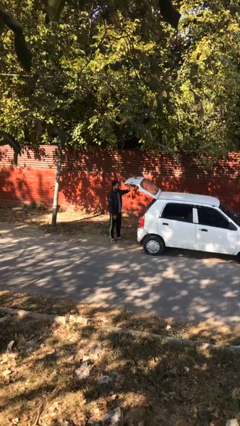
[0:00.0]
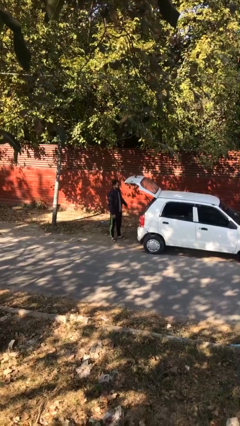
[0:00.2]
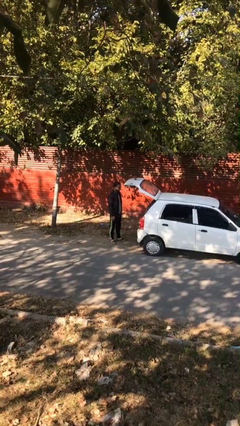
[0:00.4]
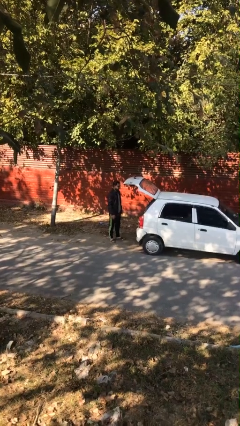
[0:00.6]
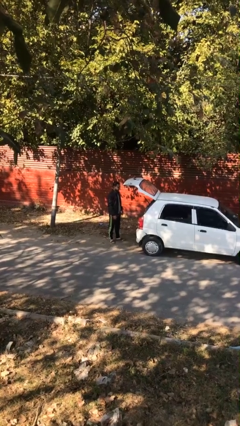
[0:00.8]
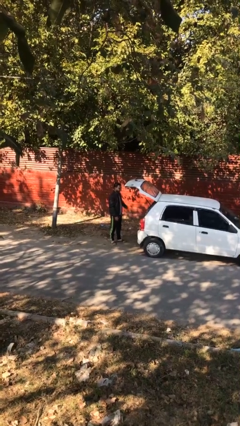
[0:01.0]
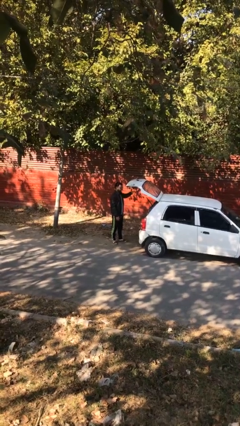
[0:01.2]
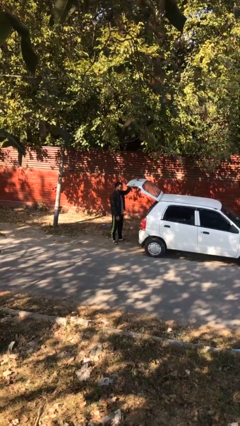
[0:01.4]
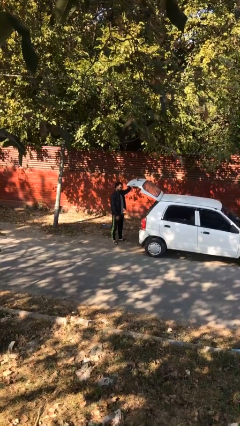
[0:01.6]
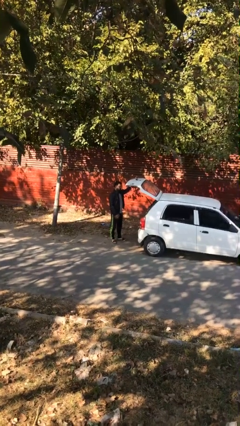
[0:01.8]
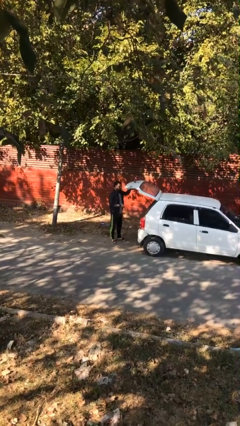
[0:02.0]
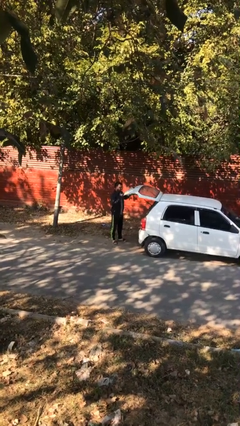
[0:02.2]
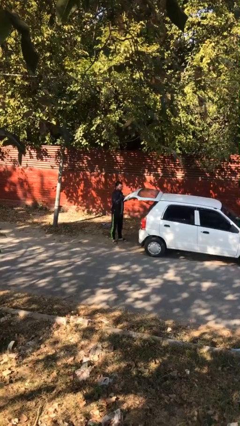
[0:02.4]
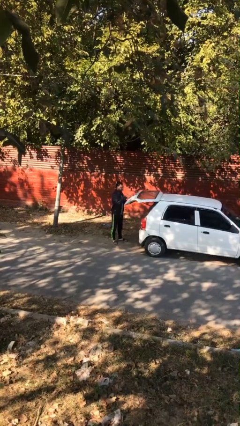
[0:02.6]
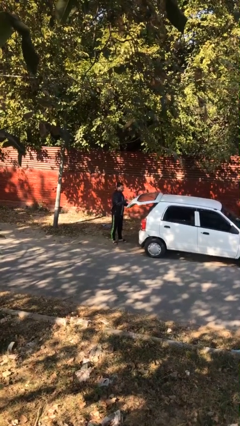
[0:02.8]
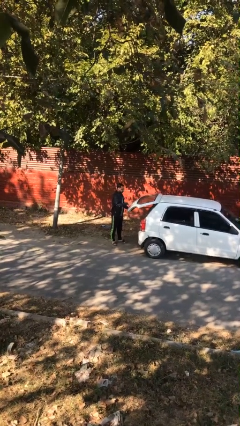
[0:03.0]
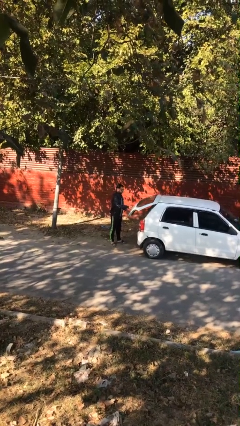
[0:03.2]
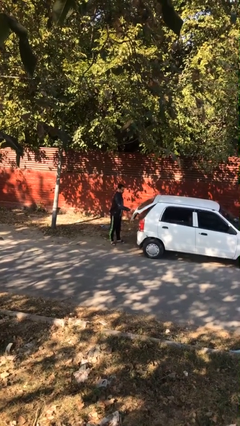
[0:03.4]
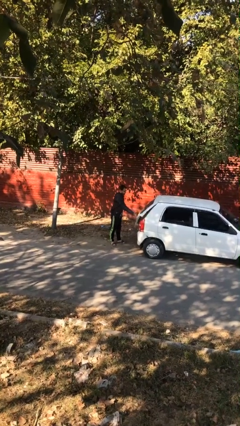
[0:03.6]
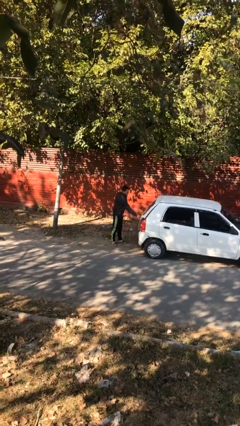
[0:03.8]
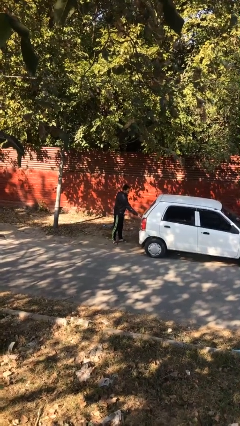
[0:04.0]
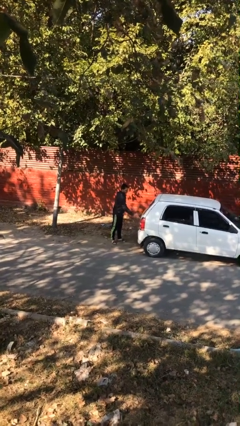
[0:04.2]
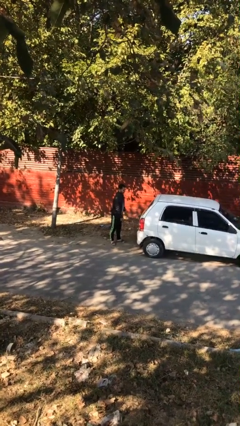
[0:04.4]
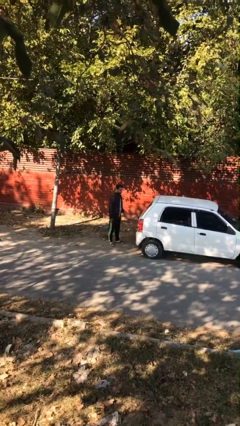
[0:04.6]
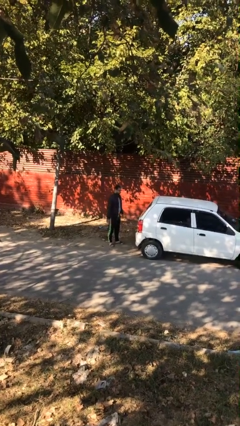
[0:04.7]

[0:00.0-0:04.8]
person closes car trunk

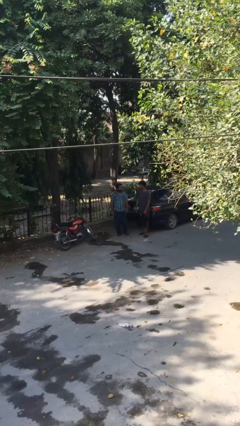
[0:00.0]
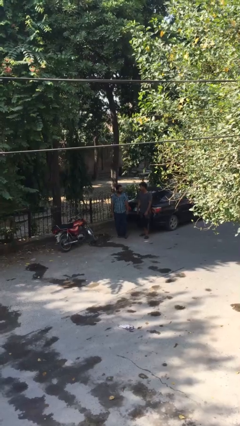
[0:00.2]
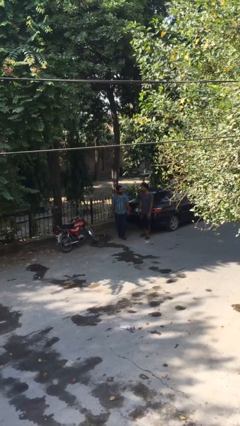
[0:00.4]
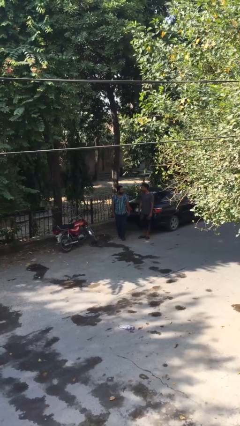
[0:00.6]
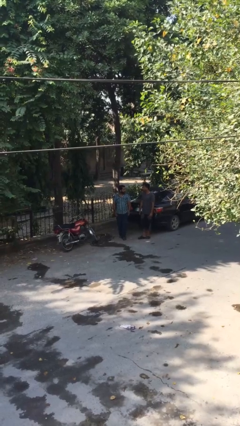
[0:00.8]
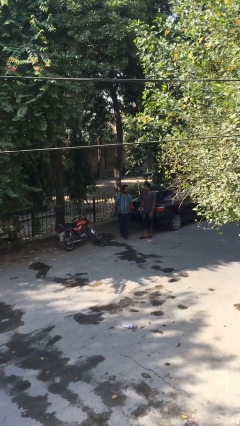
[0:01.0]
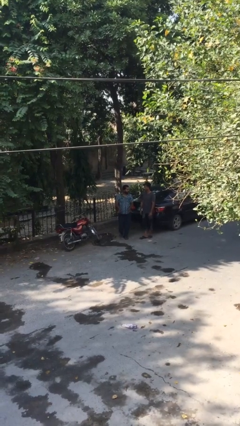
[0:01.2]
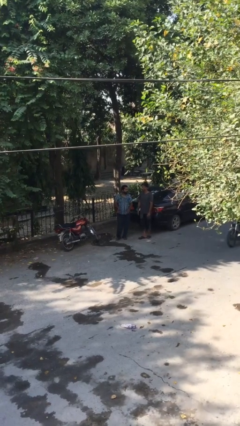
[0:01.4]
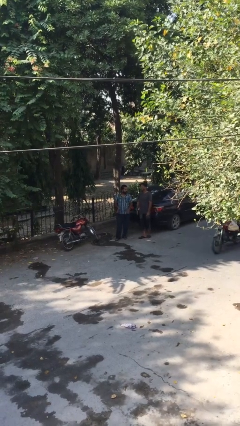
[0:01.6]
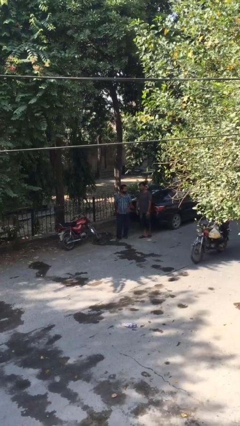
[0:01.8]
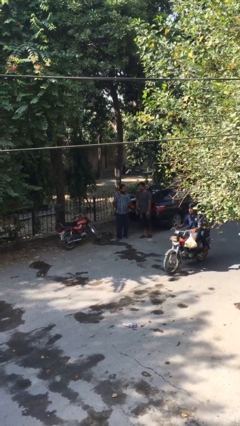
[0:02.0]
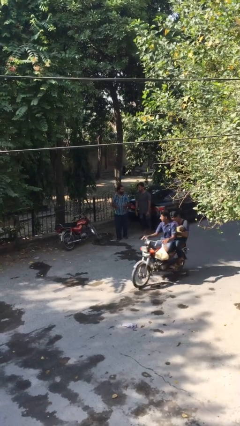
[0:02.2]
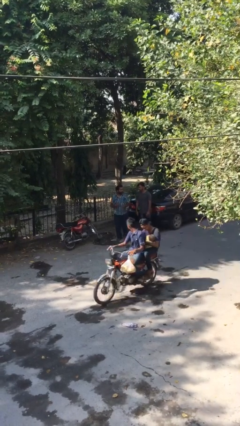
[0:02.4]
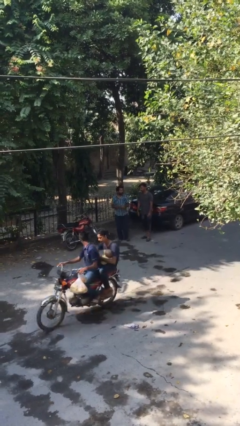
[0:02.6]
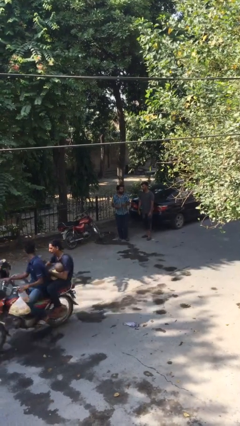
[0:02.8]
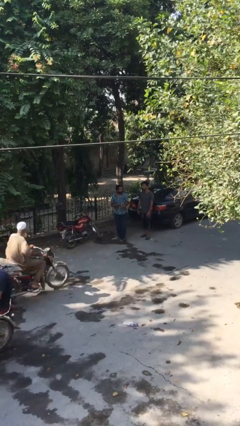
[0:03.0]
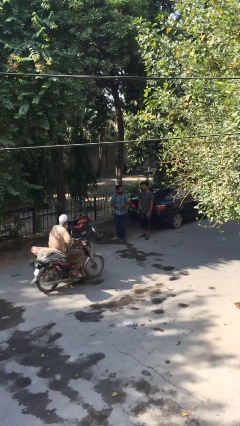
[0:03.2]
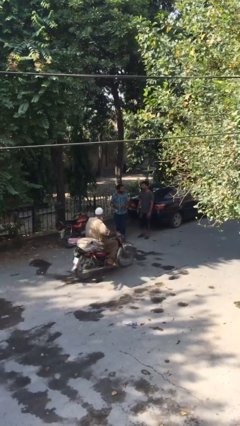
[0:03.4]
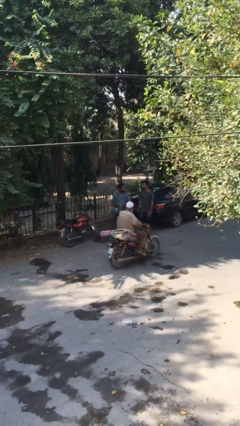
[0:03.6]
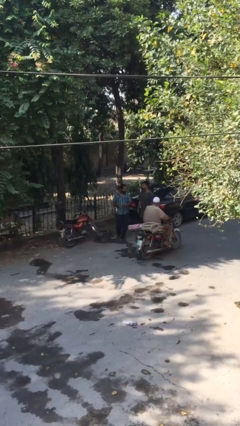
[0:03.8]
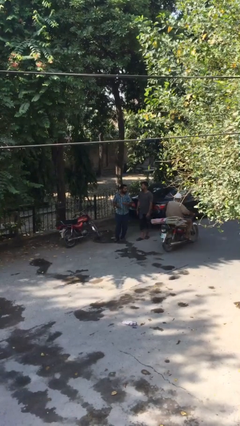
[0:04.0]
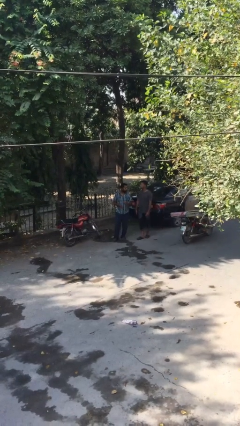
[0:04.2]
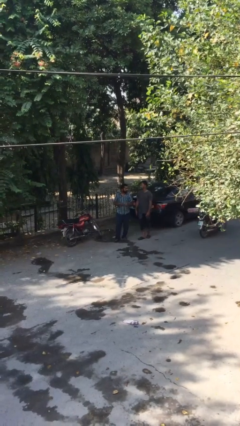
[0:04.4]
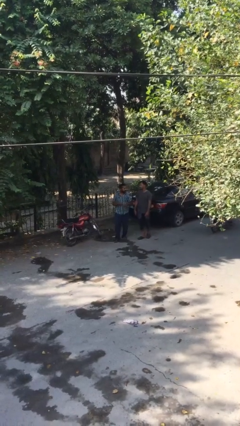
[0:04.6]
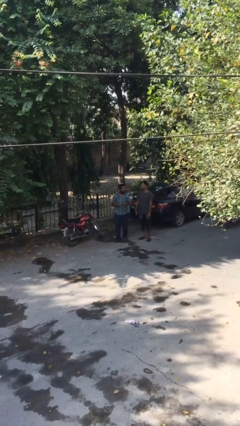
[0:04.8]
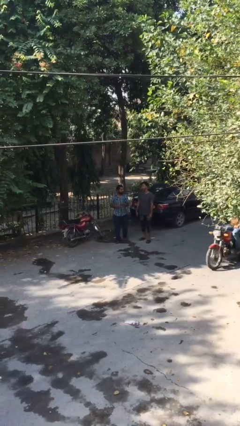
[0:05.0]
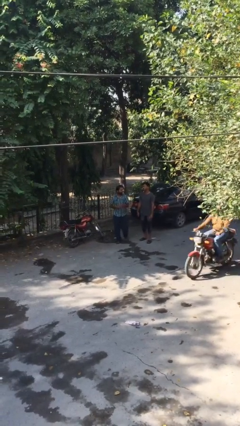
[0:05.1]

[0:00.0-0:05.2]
person talks to person

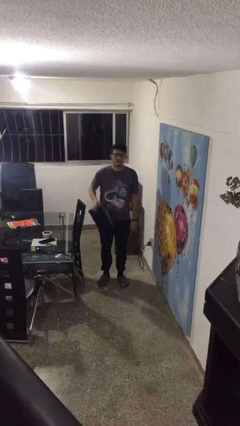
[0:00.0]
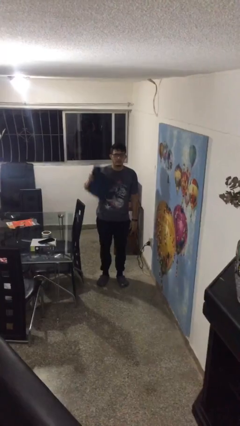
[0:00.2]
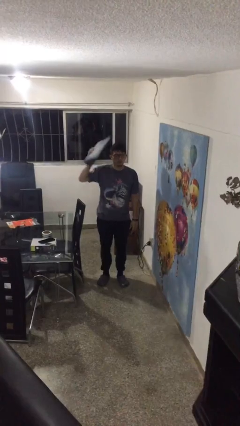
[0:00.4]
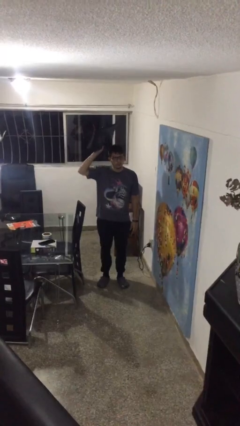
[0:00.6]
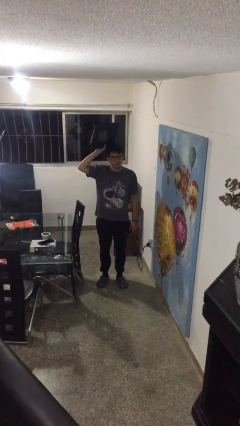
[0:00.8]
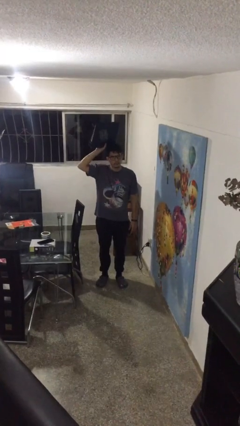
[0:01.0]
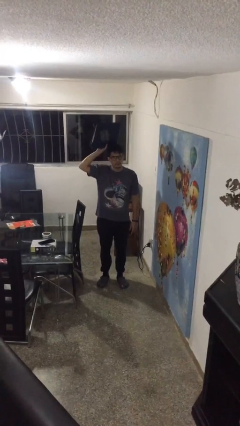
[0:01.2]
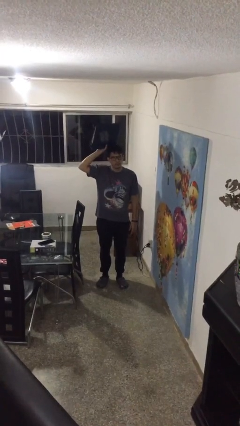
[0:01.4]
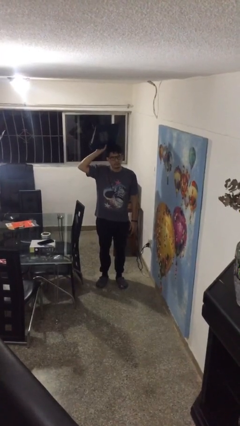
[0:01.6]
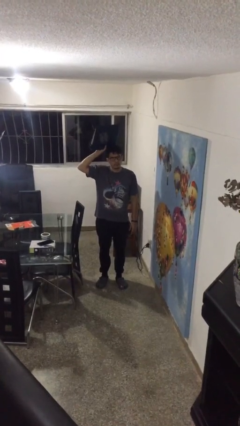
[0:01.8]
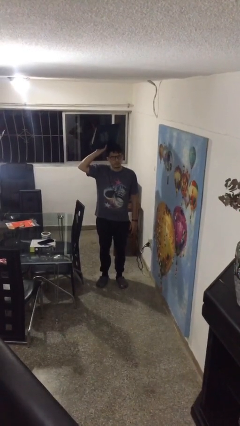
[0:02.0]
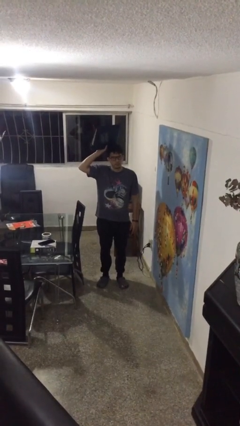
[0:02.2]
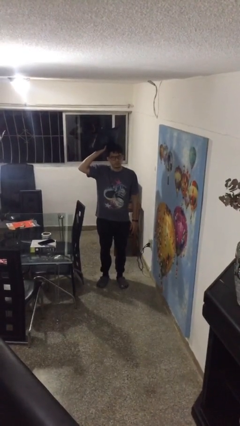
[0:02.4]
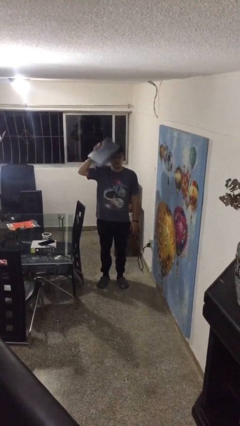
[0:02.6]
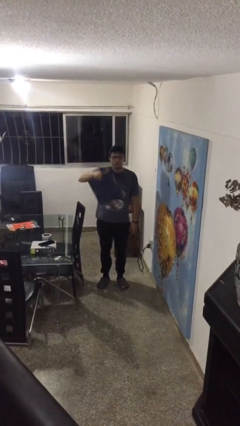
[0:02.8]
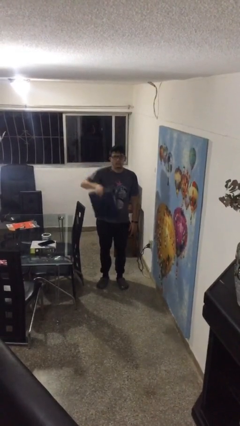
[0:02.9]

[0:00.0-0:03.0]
person holds object above head

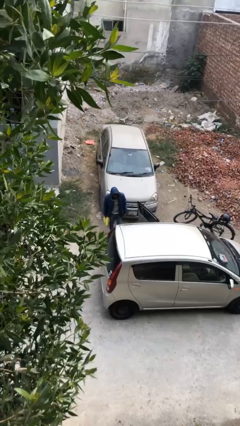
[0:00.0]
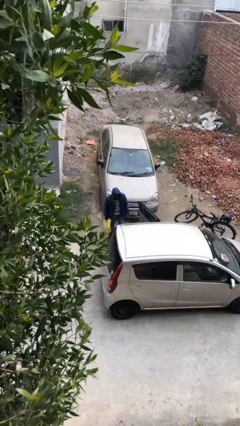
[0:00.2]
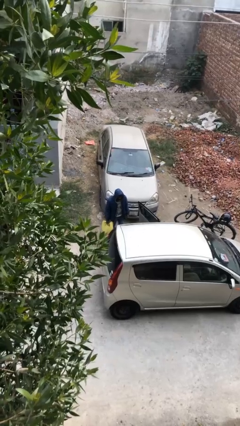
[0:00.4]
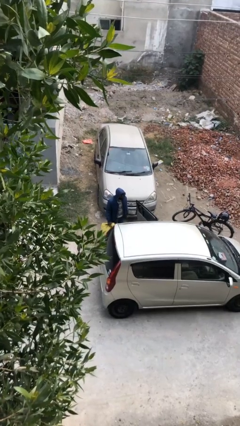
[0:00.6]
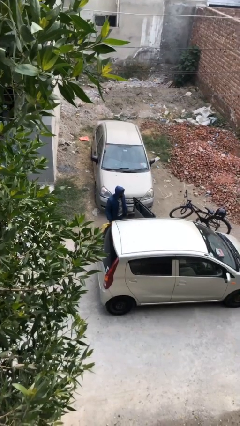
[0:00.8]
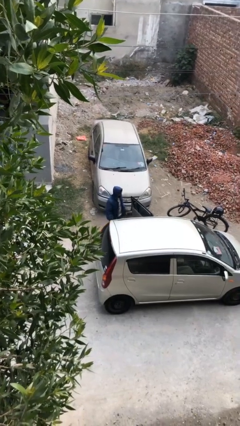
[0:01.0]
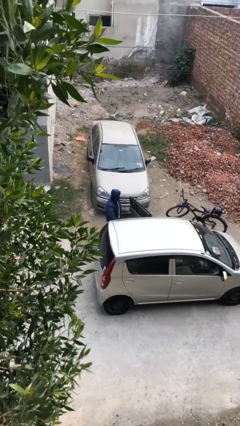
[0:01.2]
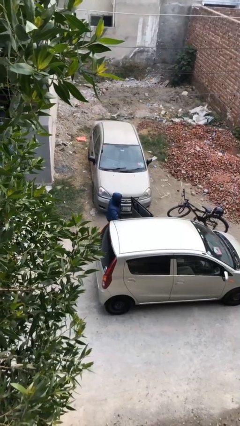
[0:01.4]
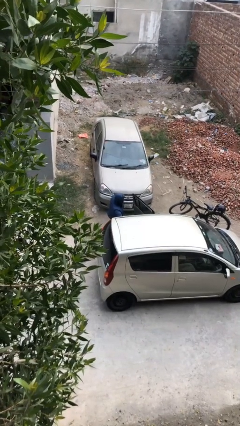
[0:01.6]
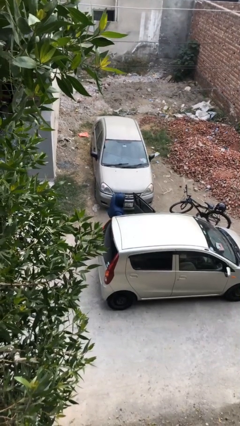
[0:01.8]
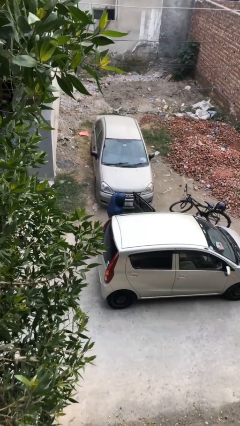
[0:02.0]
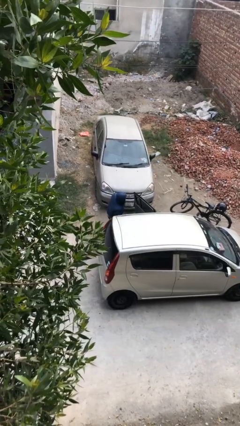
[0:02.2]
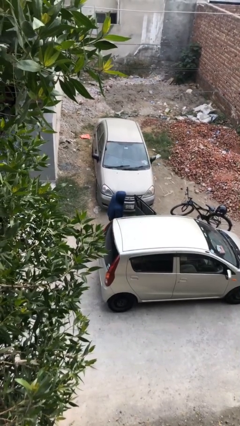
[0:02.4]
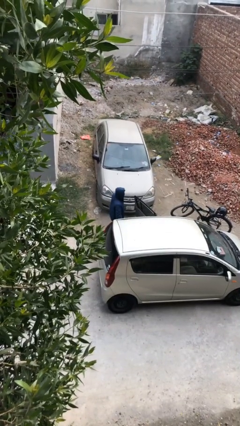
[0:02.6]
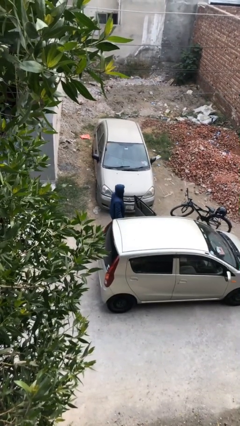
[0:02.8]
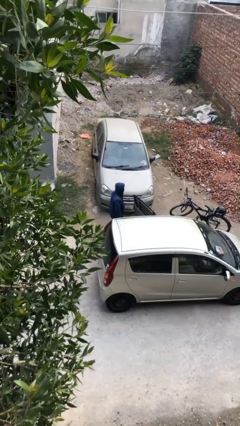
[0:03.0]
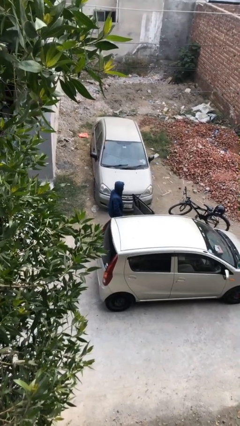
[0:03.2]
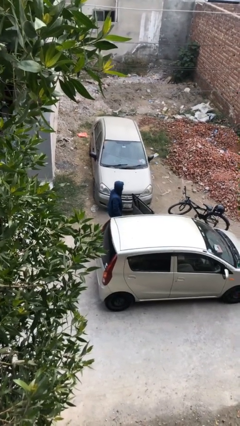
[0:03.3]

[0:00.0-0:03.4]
person loads car

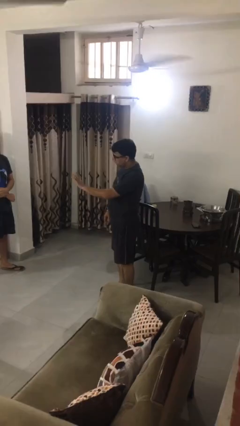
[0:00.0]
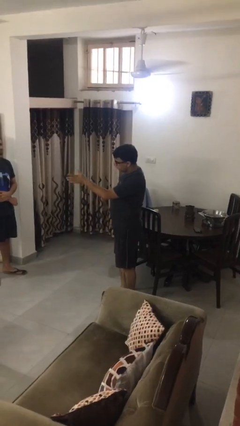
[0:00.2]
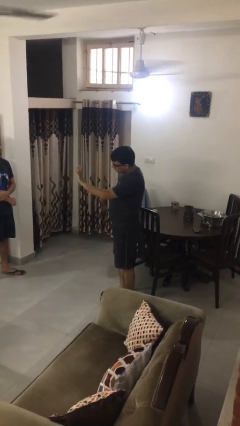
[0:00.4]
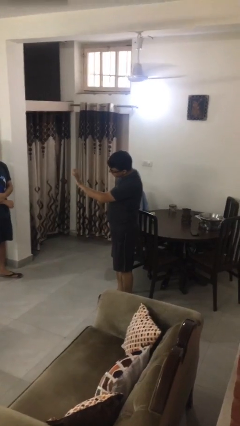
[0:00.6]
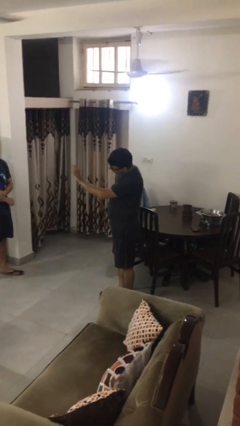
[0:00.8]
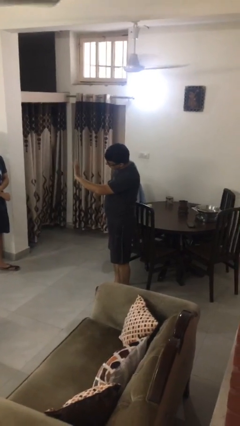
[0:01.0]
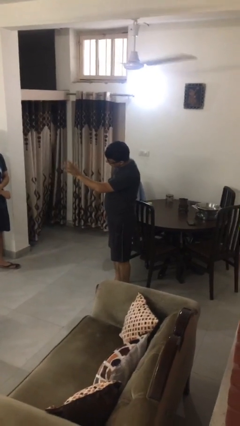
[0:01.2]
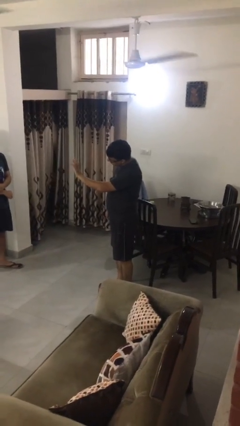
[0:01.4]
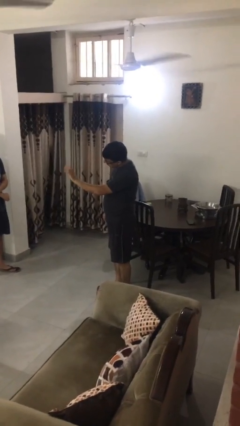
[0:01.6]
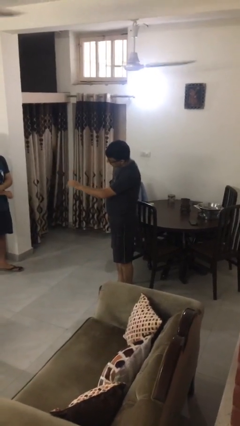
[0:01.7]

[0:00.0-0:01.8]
person waves at person
